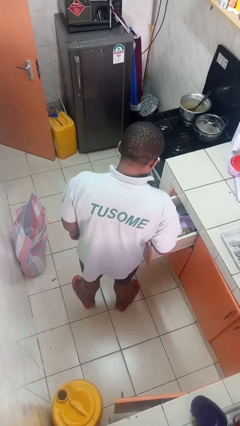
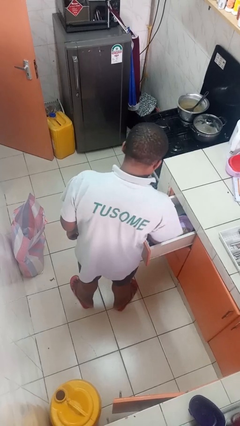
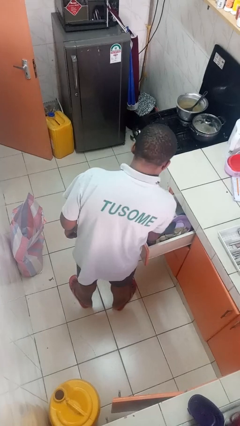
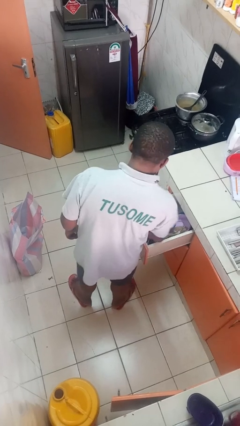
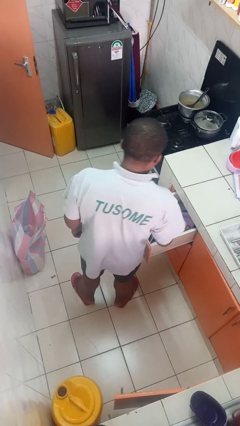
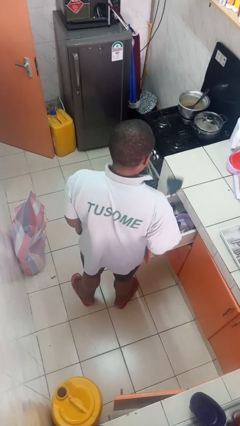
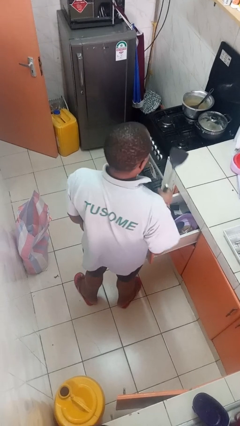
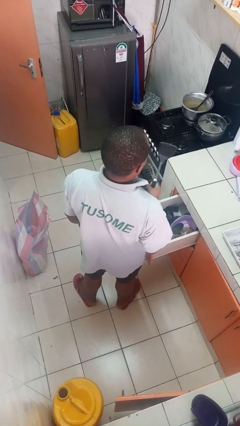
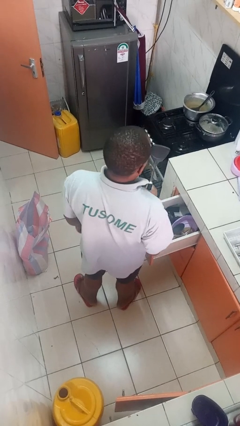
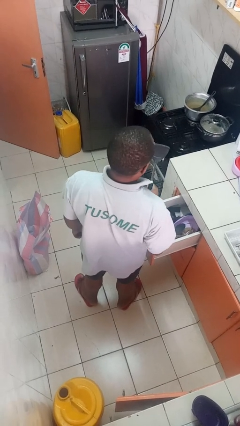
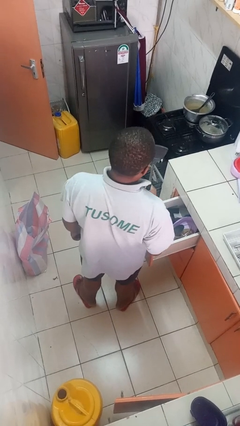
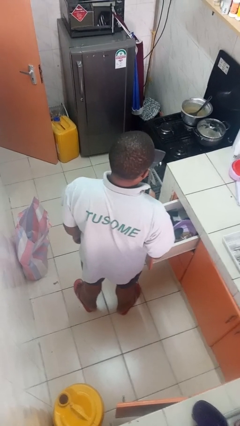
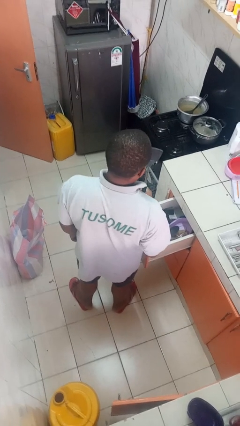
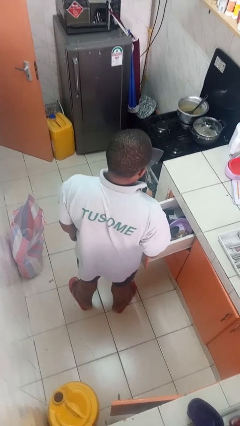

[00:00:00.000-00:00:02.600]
person takes object from kitchen drawer

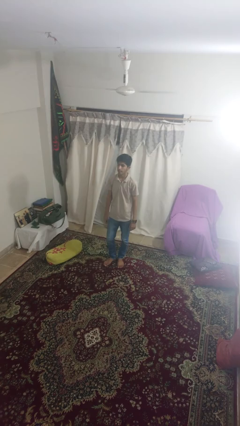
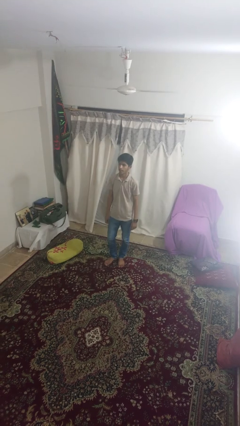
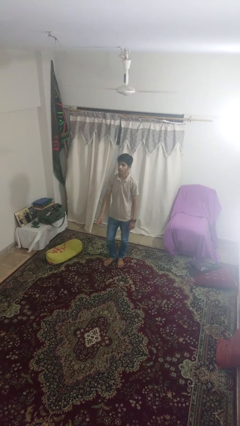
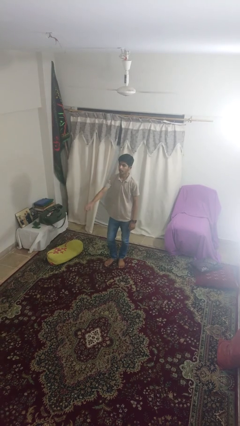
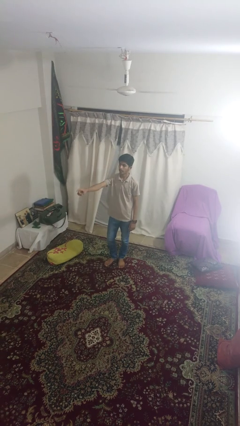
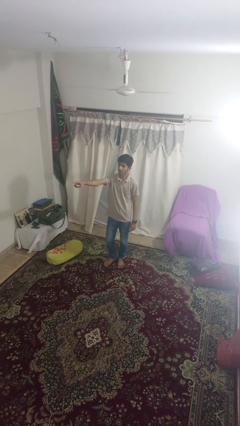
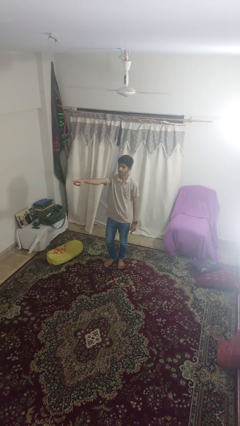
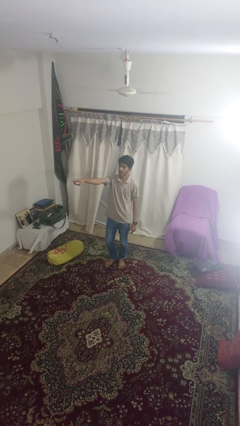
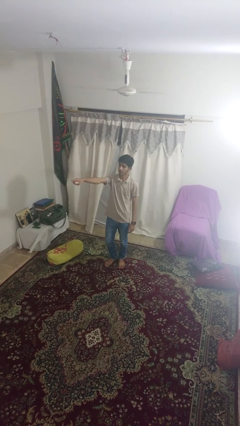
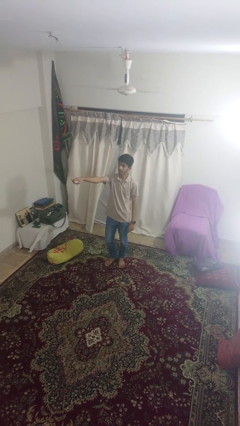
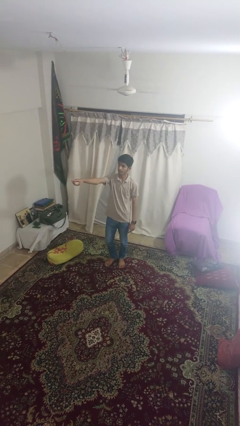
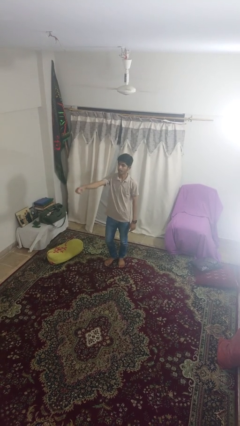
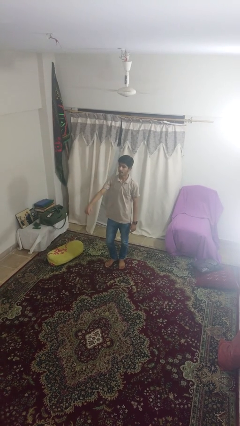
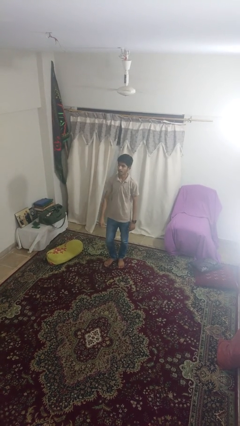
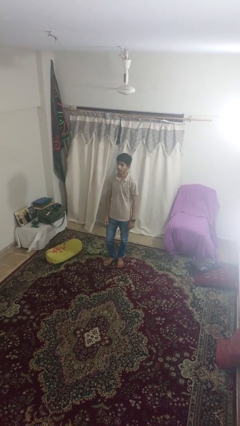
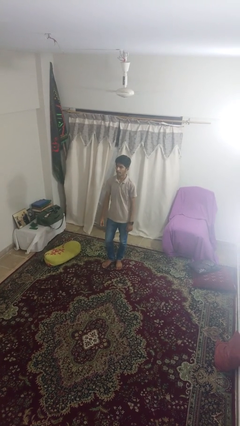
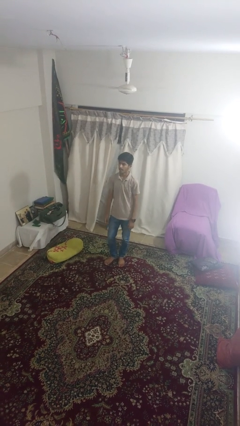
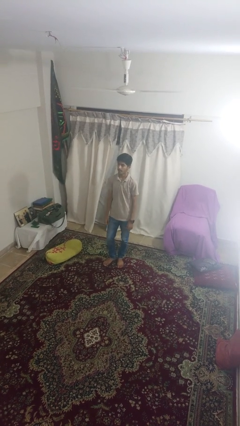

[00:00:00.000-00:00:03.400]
person points at person

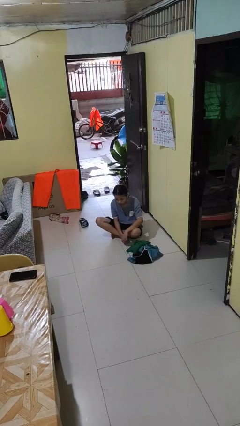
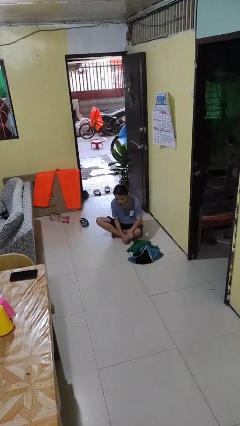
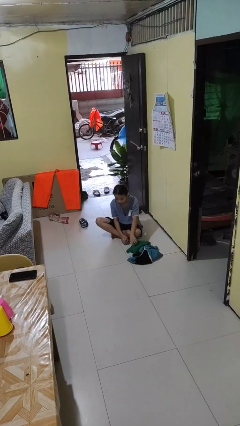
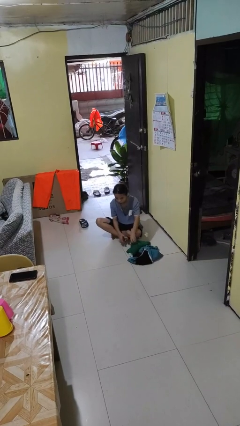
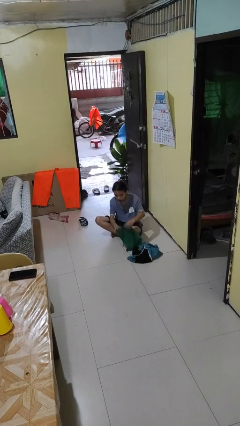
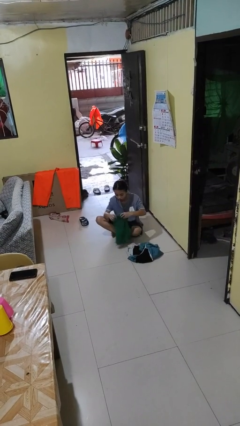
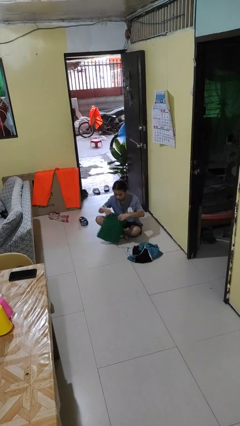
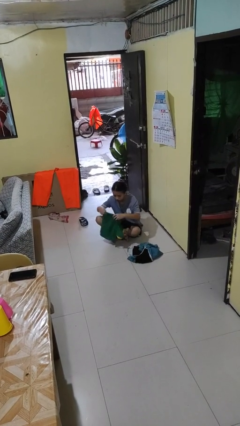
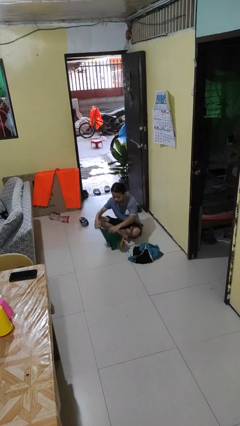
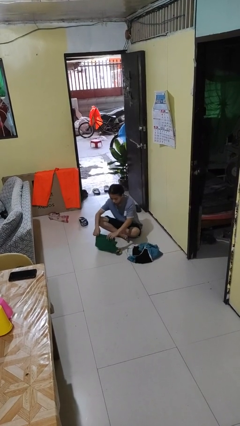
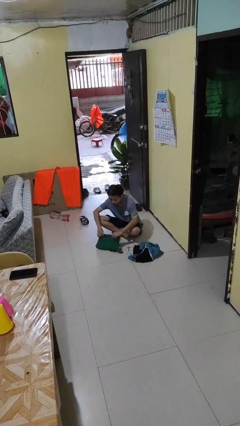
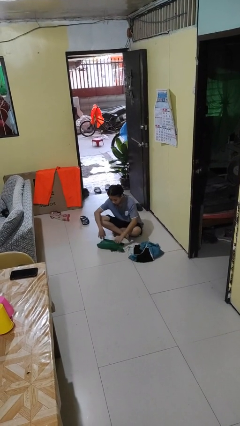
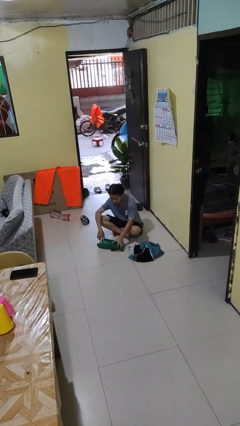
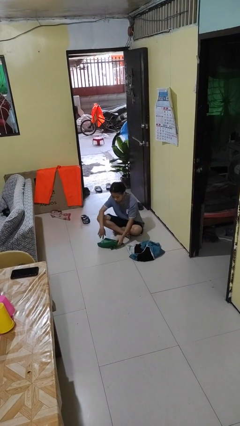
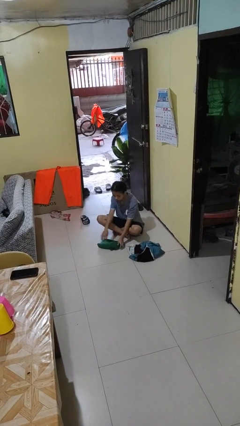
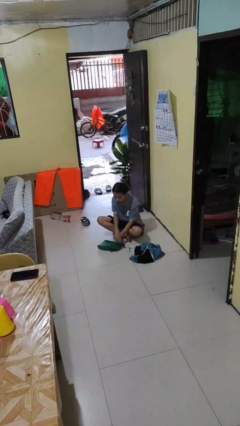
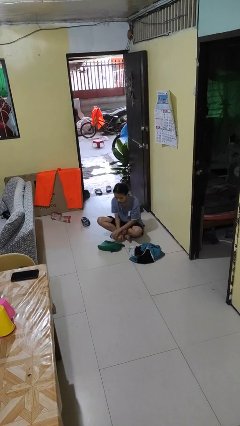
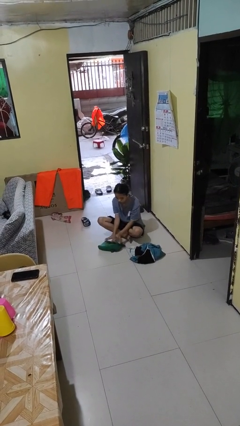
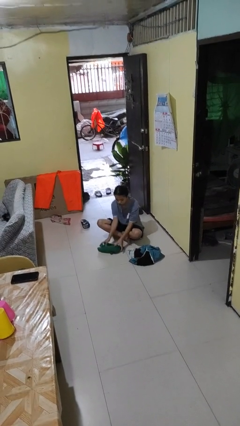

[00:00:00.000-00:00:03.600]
person folds shirt

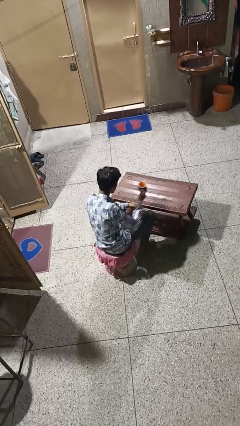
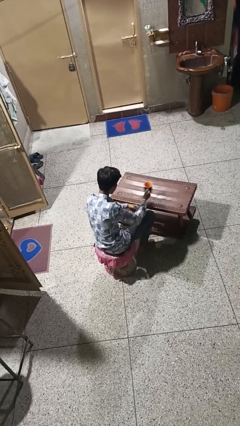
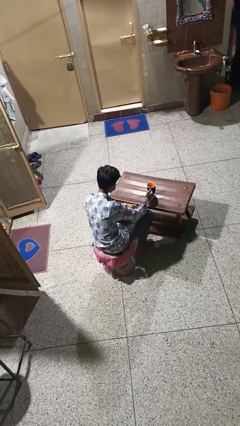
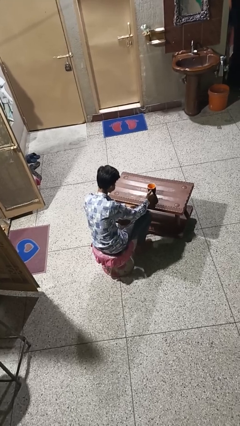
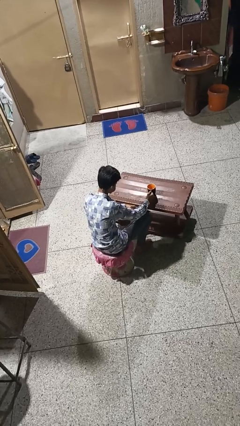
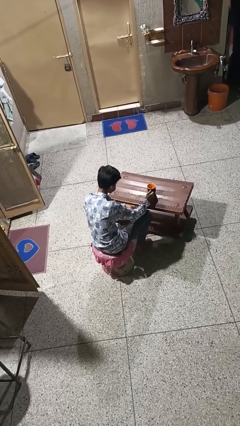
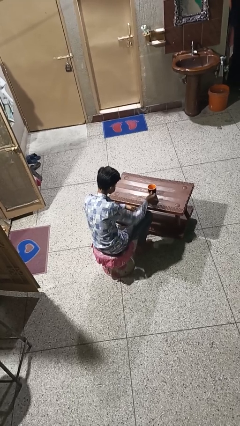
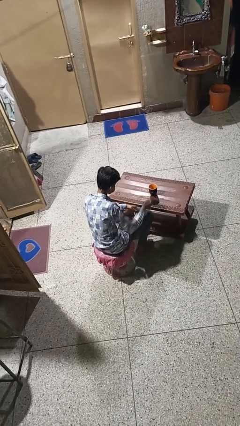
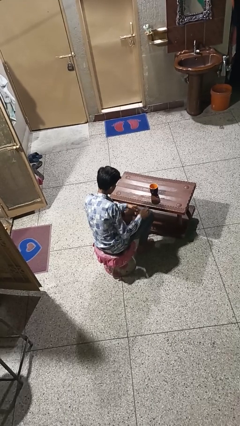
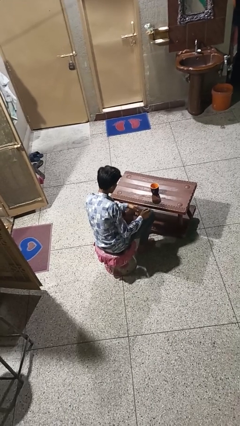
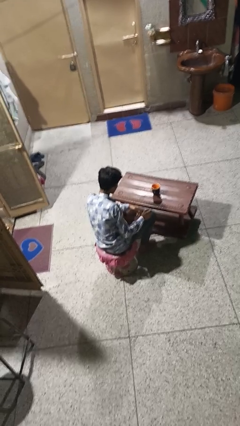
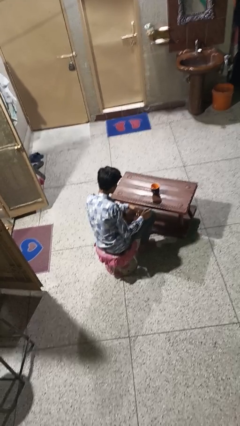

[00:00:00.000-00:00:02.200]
person puts down object on table

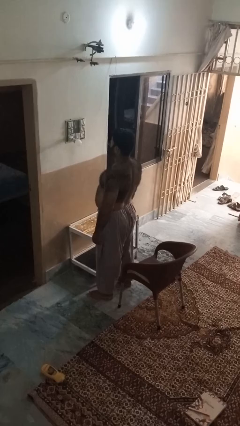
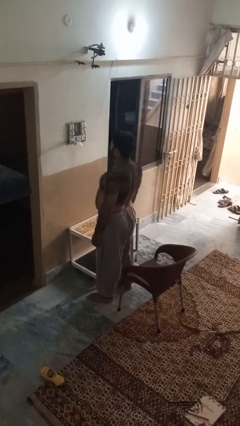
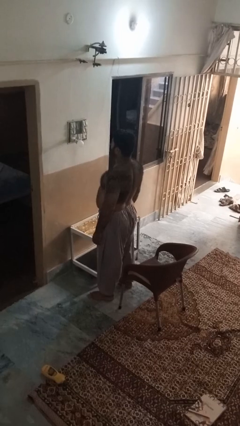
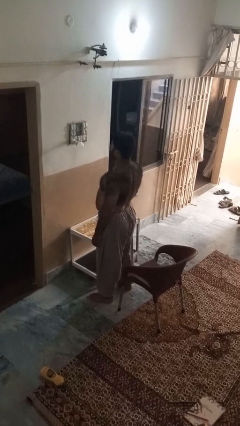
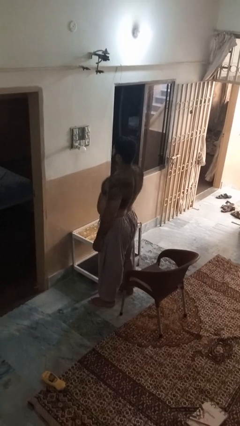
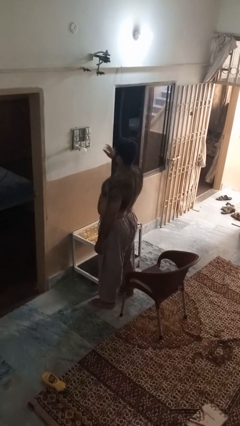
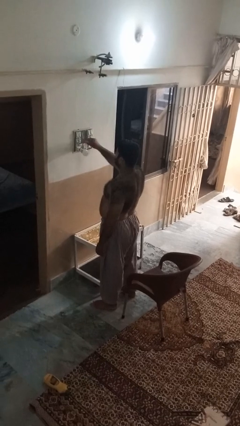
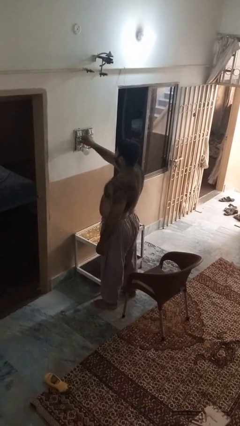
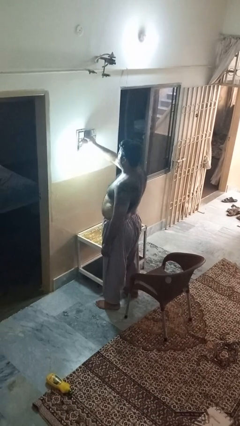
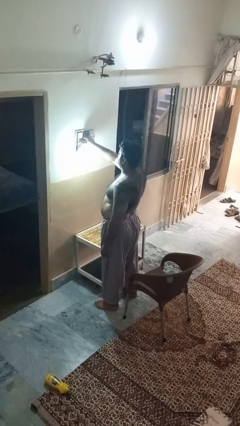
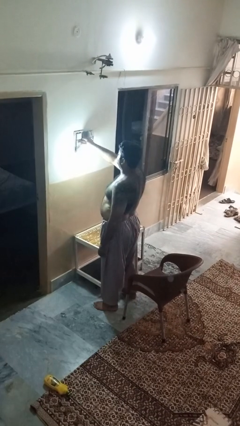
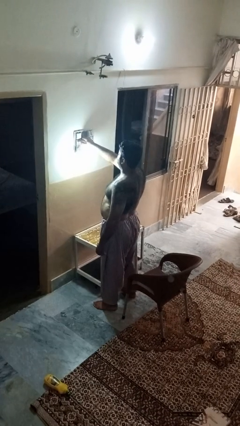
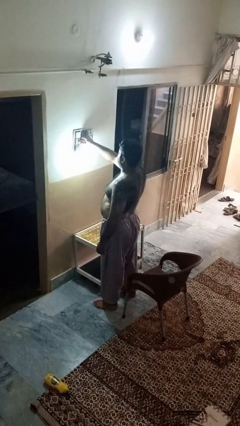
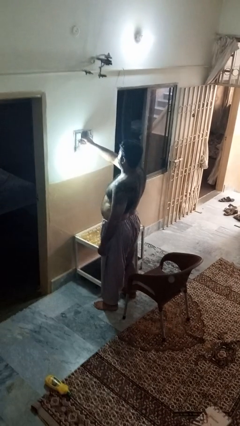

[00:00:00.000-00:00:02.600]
person turns on lamp

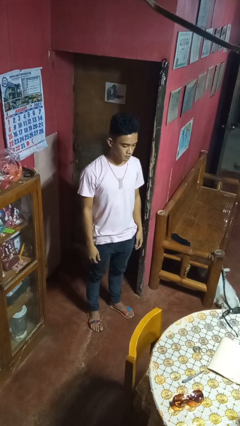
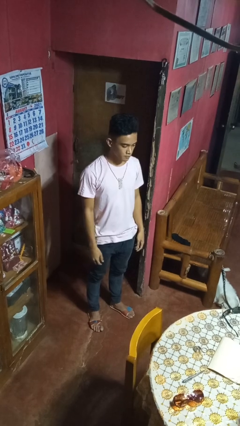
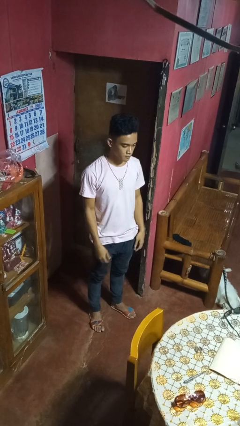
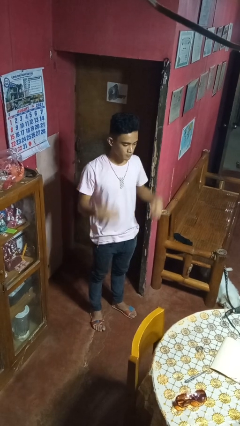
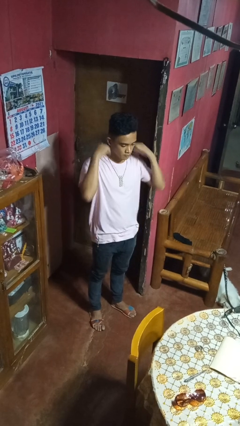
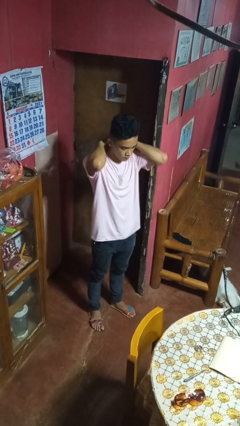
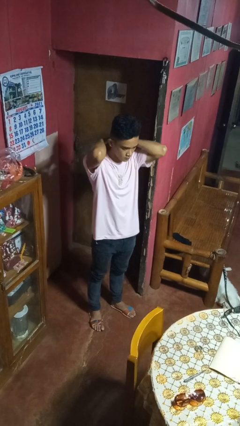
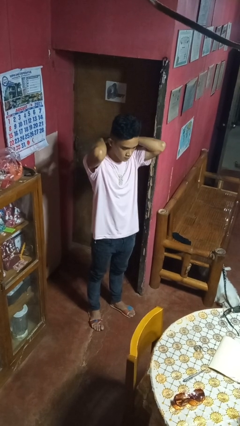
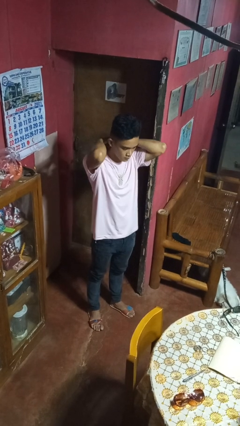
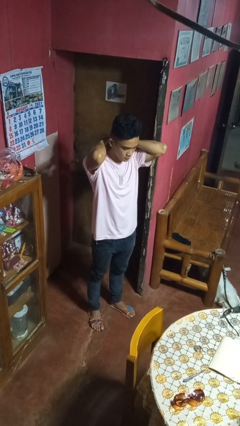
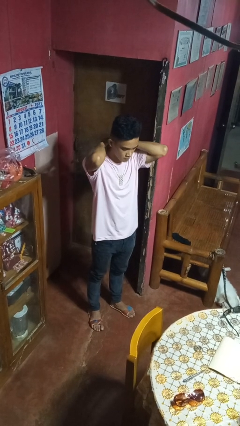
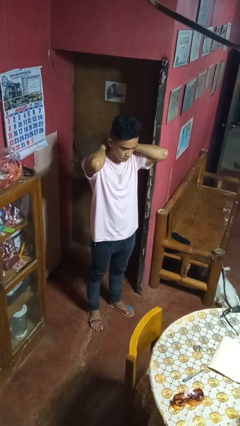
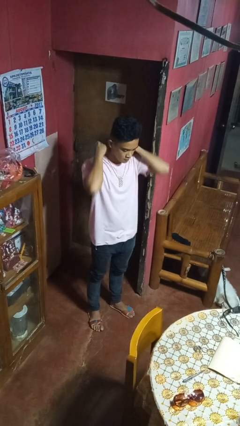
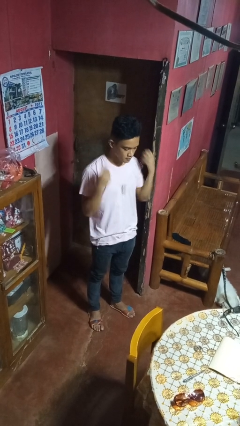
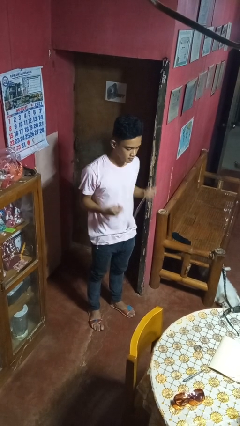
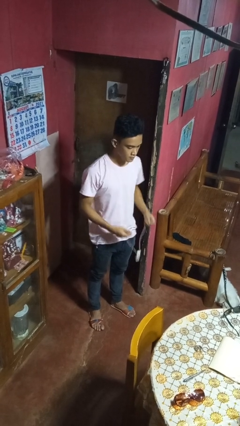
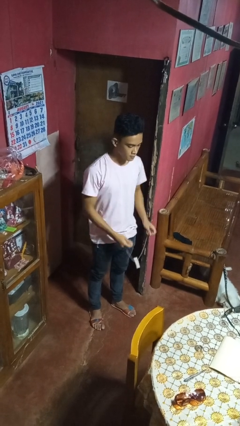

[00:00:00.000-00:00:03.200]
person takes off necklace
